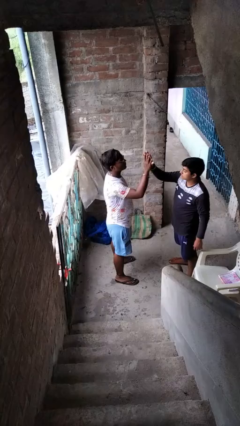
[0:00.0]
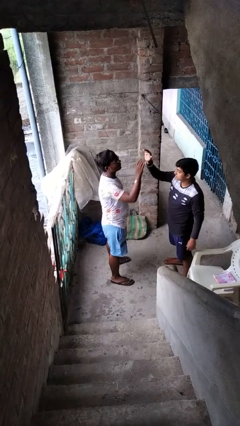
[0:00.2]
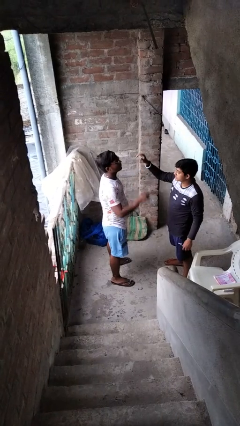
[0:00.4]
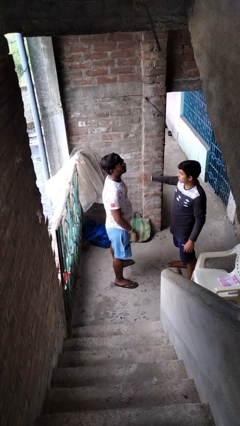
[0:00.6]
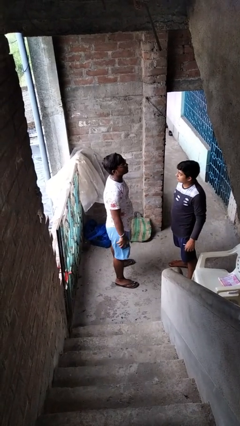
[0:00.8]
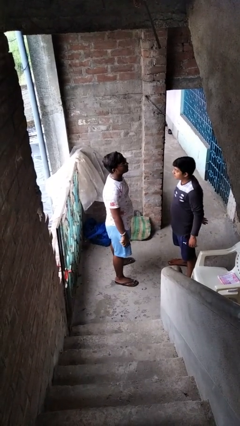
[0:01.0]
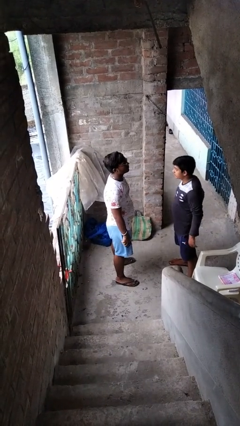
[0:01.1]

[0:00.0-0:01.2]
person highfives hand

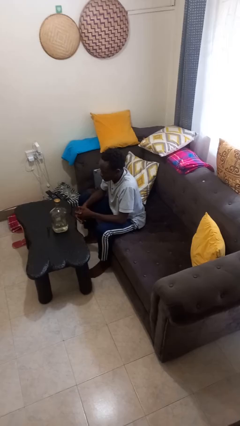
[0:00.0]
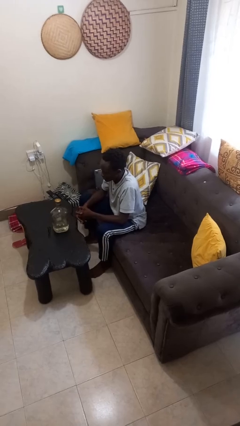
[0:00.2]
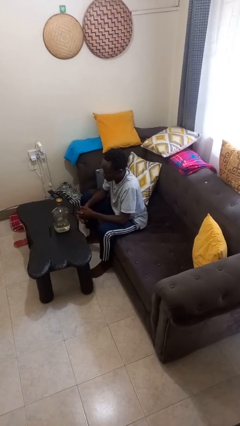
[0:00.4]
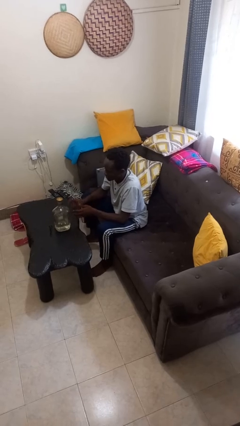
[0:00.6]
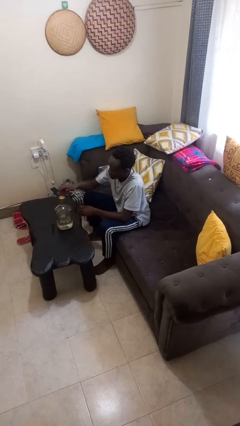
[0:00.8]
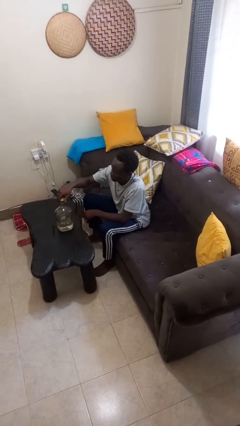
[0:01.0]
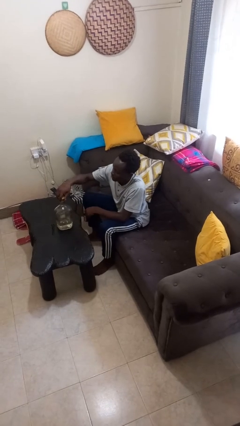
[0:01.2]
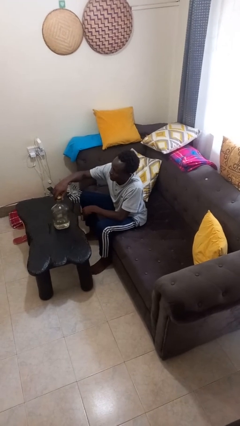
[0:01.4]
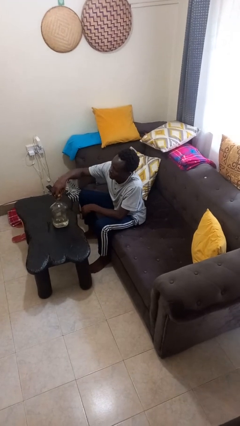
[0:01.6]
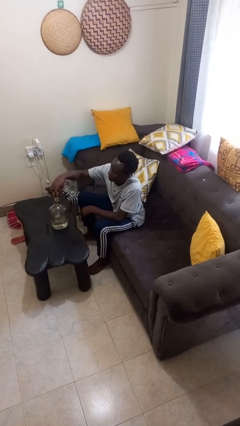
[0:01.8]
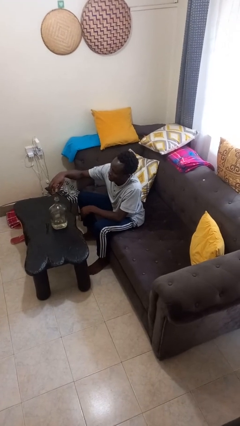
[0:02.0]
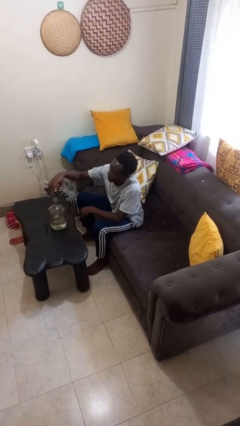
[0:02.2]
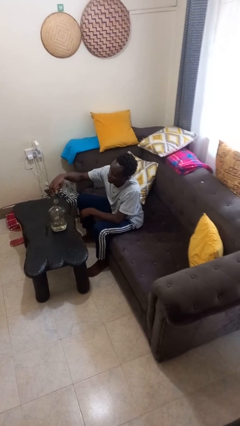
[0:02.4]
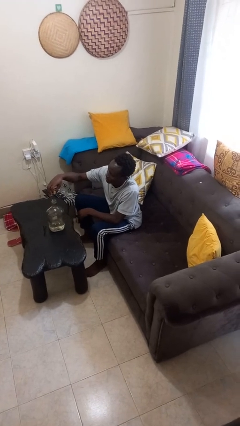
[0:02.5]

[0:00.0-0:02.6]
person unscrews lid from bottle

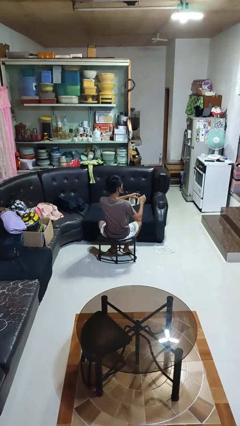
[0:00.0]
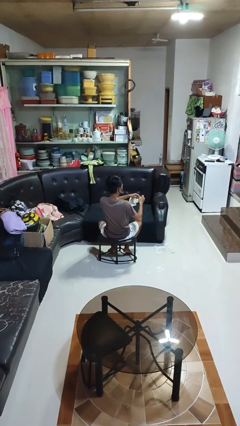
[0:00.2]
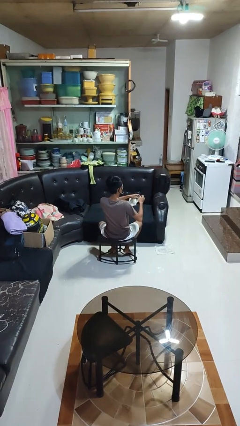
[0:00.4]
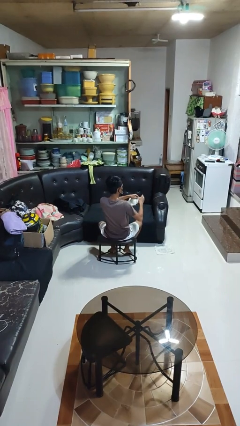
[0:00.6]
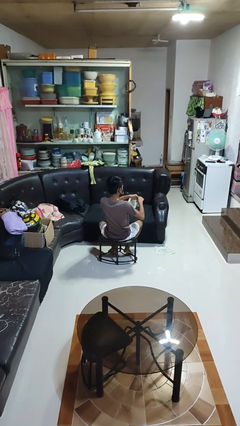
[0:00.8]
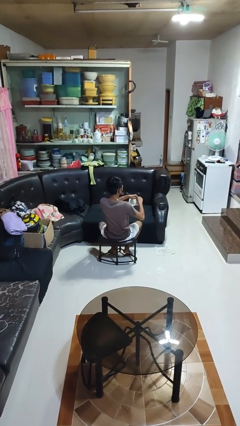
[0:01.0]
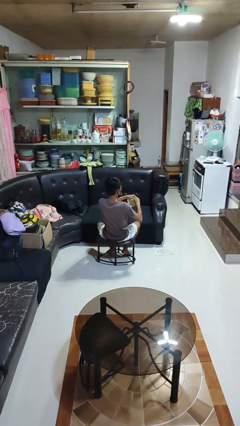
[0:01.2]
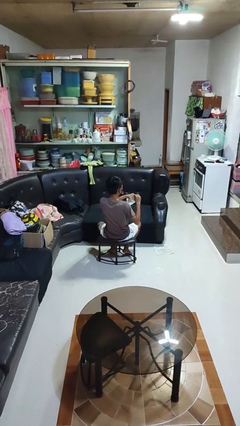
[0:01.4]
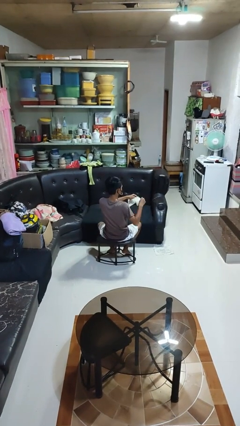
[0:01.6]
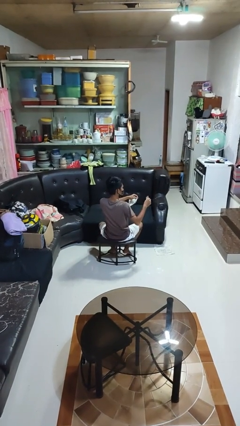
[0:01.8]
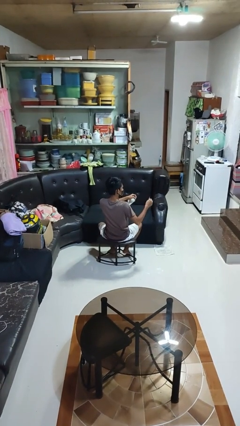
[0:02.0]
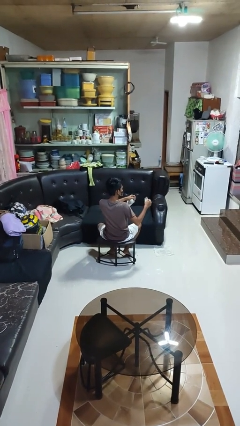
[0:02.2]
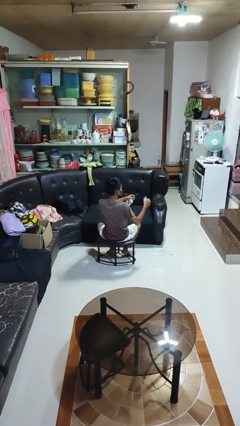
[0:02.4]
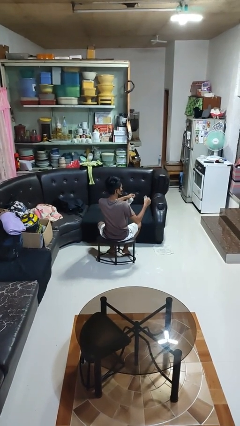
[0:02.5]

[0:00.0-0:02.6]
person tears paper

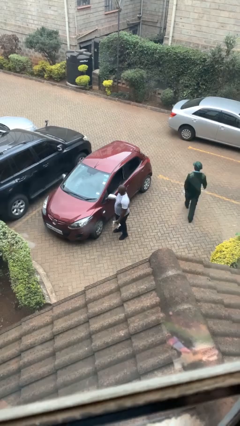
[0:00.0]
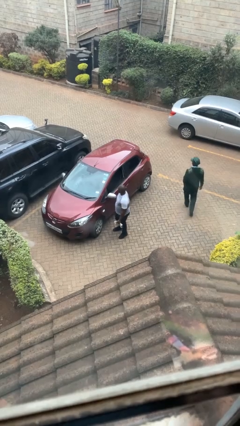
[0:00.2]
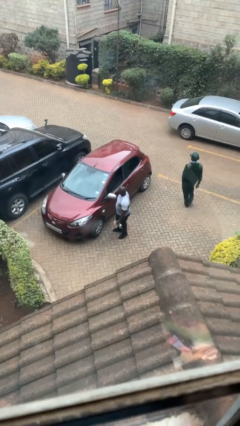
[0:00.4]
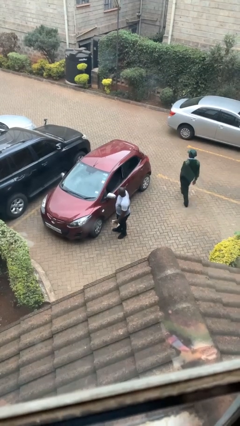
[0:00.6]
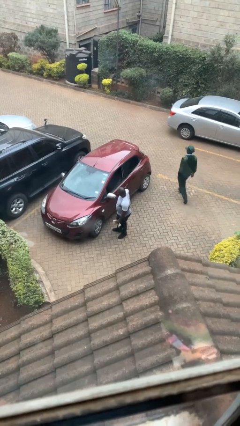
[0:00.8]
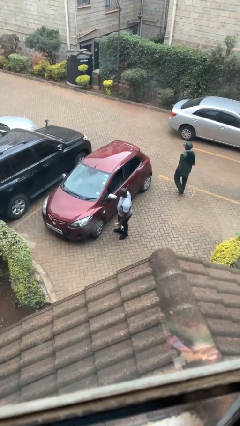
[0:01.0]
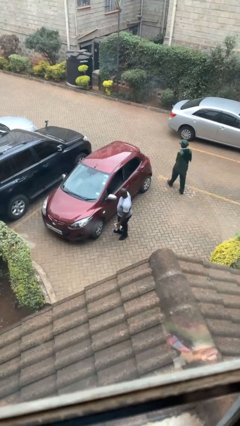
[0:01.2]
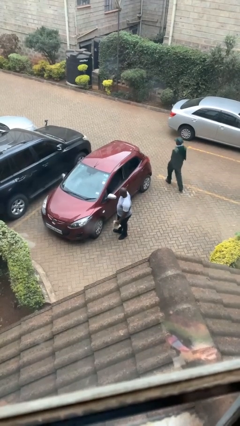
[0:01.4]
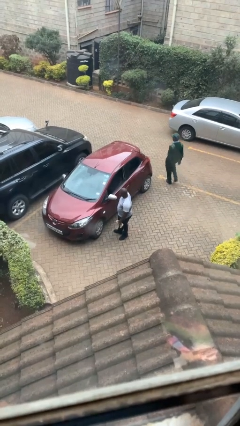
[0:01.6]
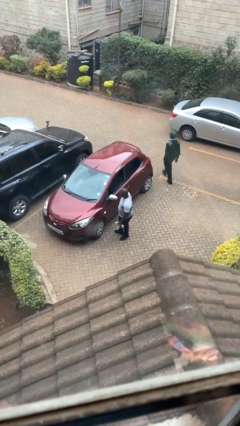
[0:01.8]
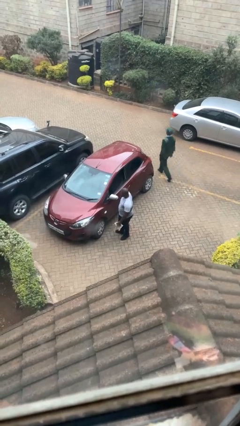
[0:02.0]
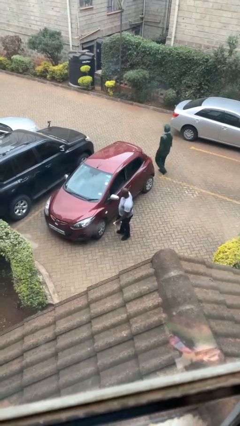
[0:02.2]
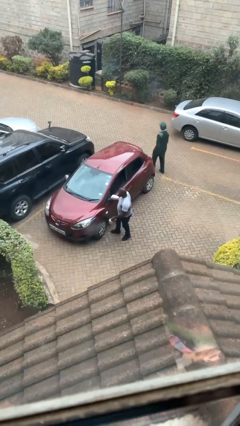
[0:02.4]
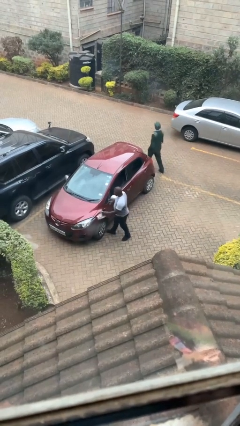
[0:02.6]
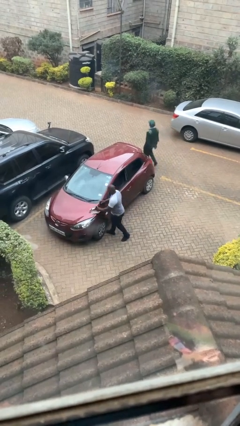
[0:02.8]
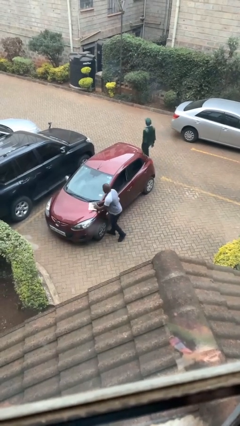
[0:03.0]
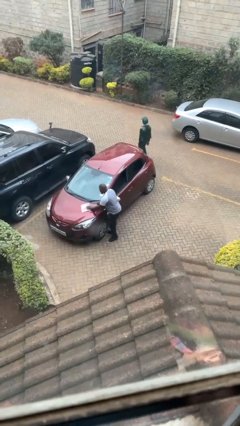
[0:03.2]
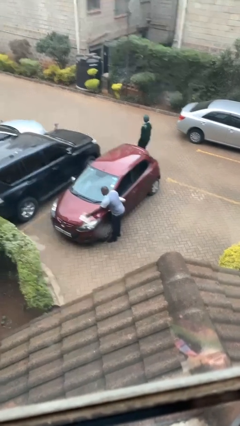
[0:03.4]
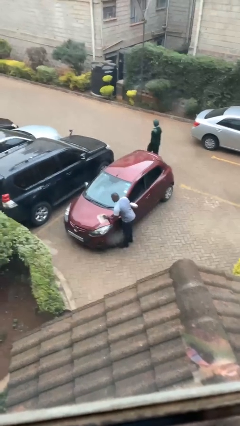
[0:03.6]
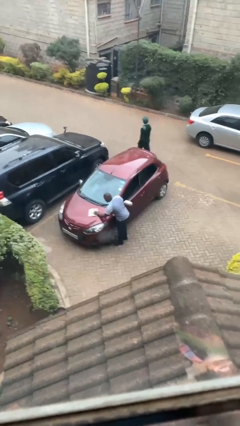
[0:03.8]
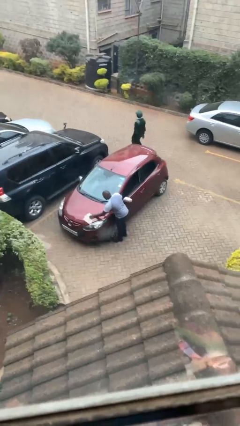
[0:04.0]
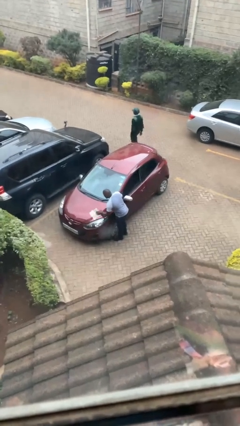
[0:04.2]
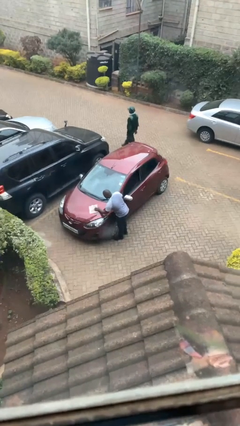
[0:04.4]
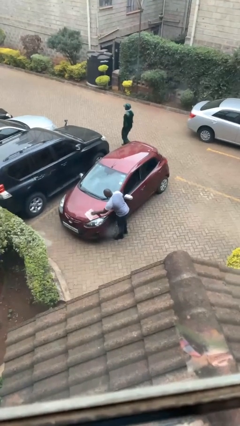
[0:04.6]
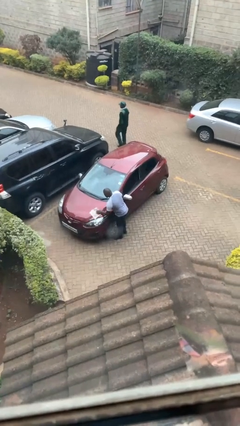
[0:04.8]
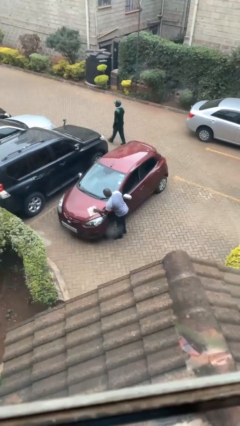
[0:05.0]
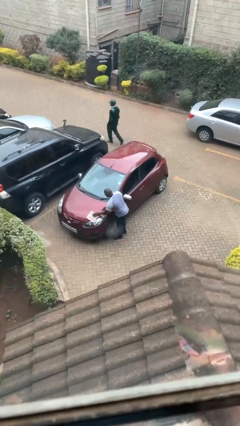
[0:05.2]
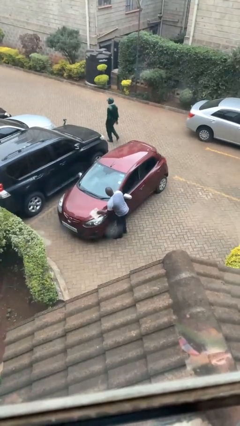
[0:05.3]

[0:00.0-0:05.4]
person polishes car with rag

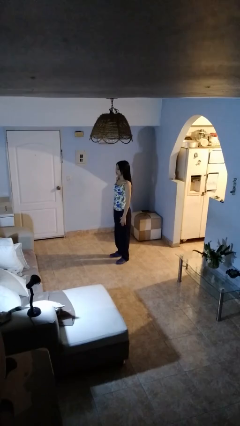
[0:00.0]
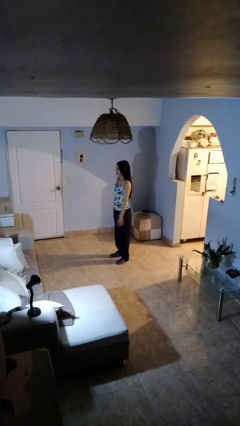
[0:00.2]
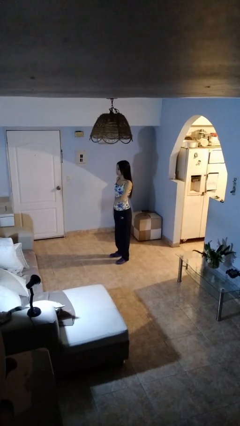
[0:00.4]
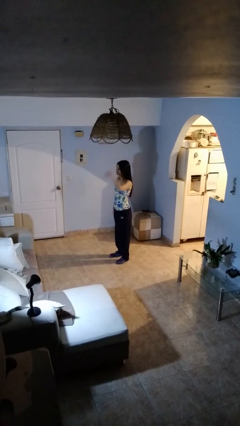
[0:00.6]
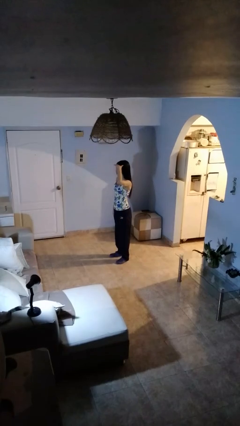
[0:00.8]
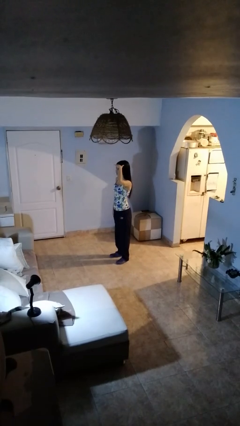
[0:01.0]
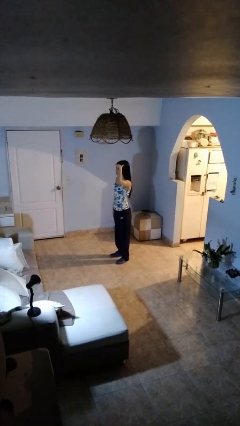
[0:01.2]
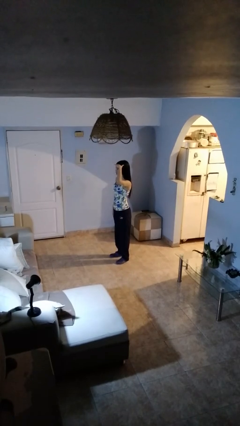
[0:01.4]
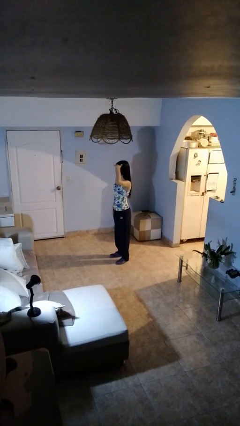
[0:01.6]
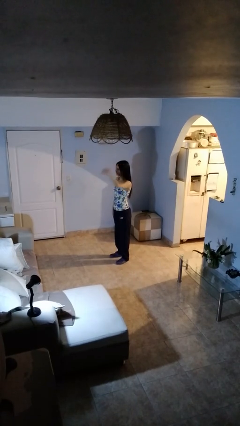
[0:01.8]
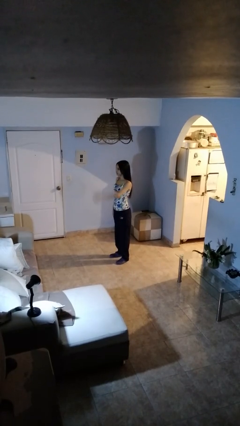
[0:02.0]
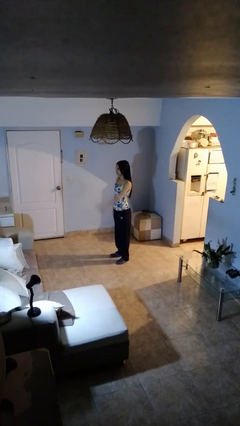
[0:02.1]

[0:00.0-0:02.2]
person salutes

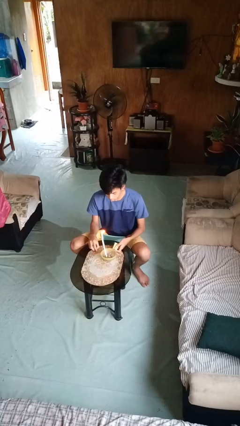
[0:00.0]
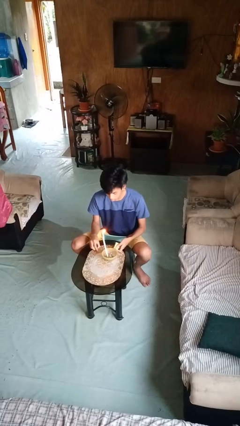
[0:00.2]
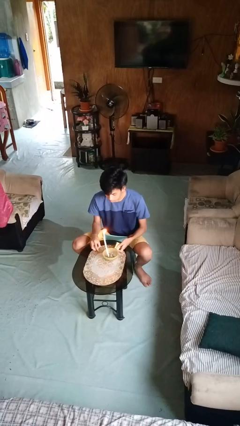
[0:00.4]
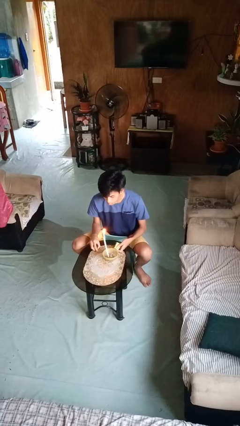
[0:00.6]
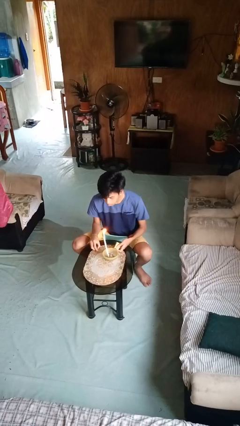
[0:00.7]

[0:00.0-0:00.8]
person extinguishes candle

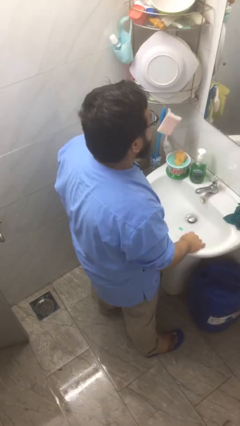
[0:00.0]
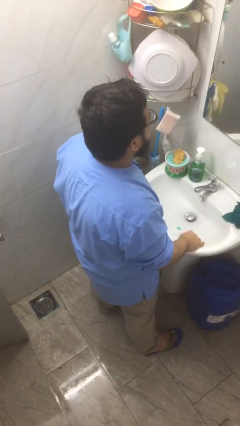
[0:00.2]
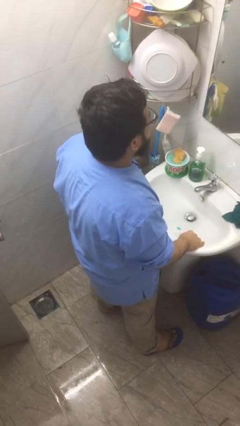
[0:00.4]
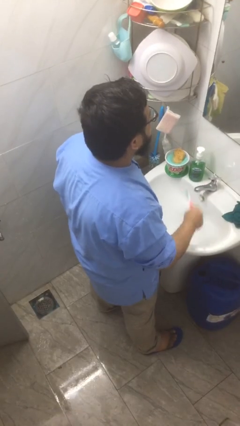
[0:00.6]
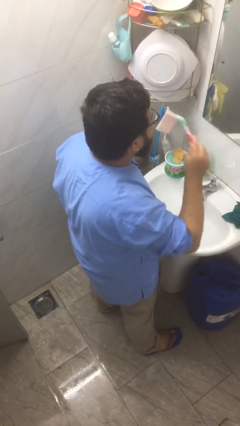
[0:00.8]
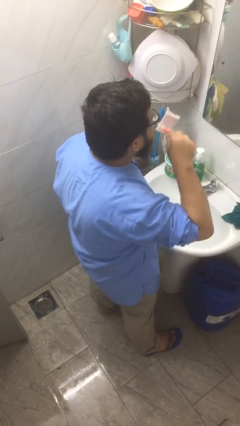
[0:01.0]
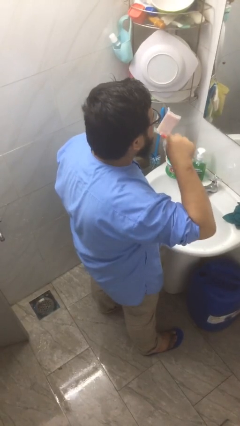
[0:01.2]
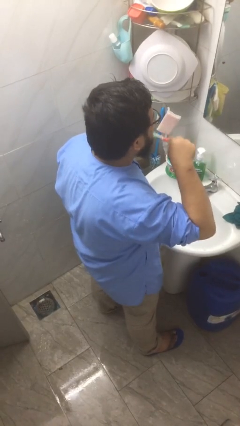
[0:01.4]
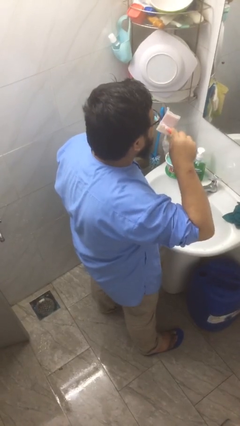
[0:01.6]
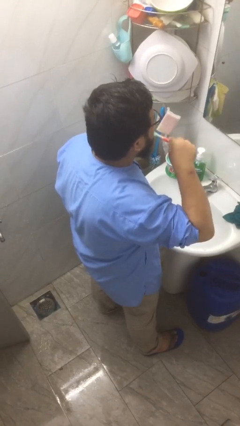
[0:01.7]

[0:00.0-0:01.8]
person brushes teeth

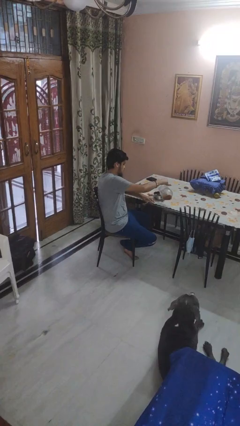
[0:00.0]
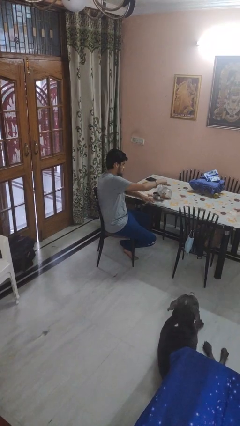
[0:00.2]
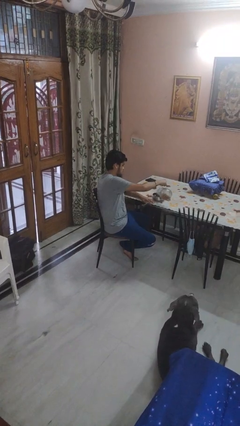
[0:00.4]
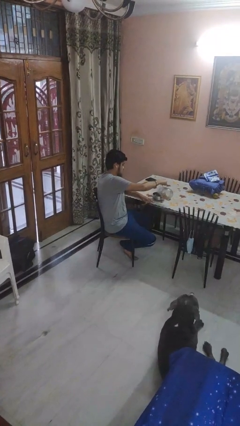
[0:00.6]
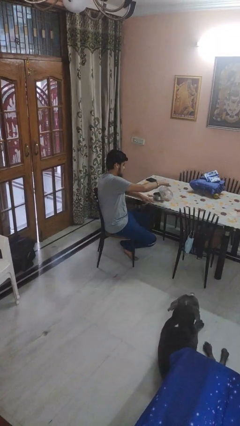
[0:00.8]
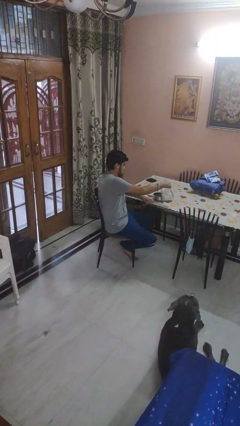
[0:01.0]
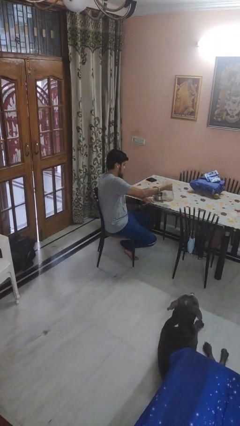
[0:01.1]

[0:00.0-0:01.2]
person pours into bowl
